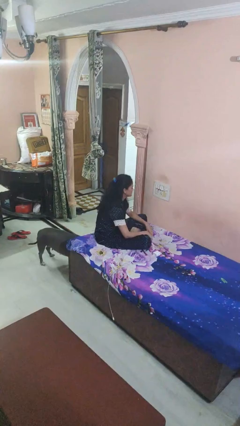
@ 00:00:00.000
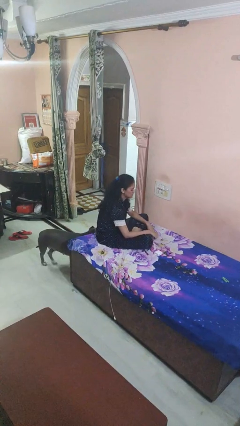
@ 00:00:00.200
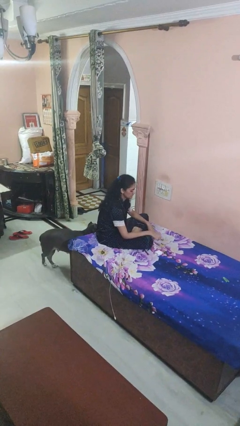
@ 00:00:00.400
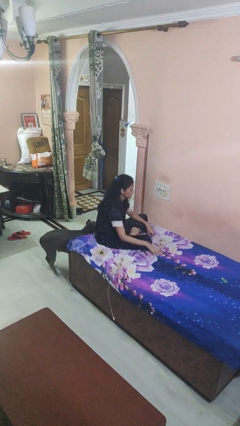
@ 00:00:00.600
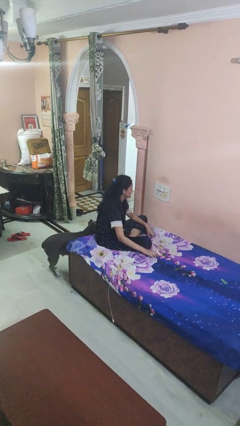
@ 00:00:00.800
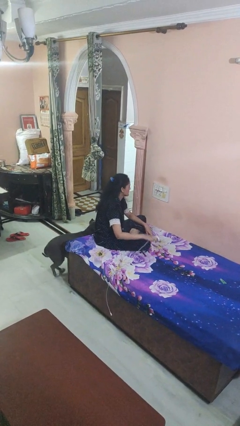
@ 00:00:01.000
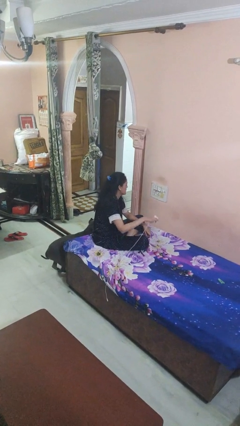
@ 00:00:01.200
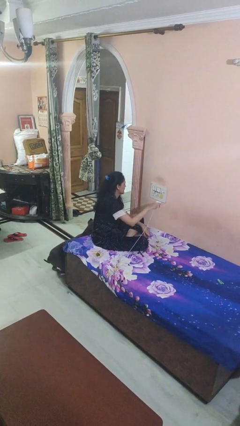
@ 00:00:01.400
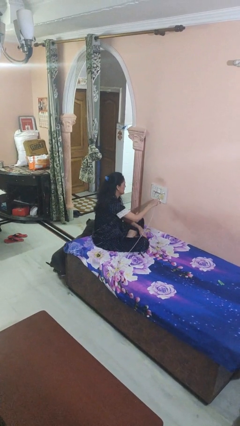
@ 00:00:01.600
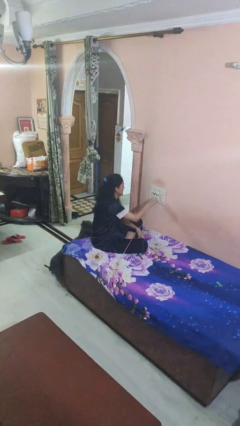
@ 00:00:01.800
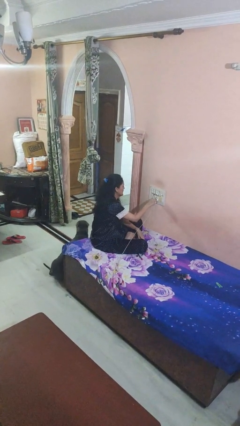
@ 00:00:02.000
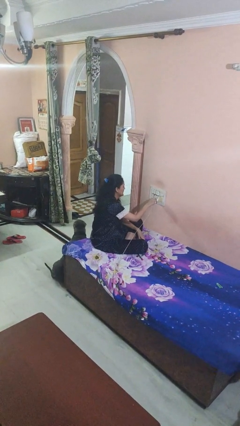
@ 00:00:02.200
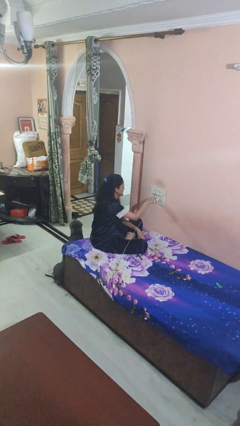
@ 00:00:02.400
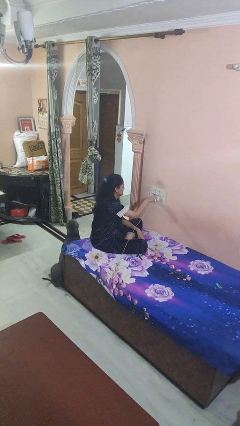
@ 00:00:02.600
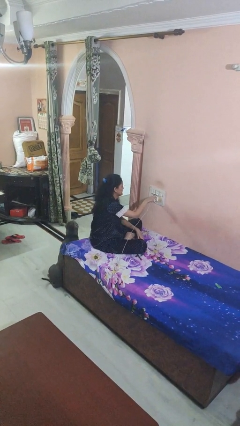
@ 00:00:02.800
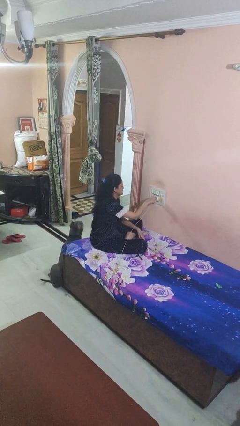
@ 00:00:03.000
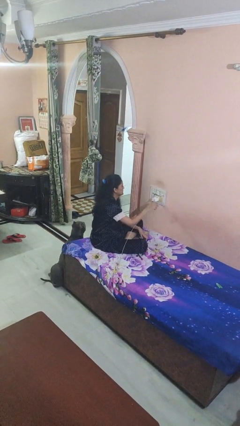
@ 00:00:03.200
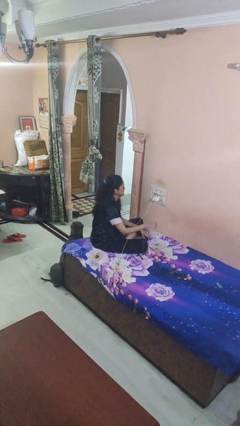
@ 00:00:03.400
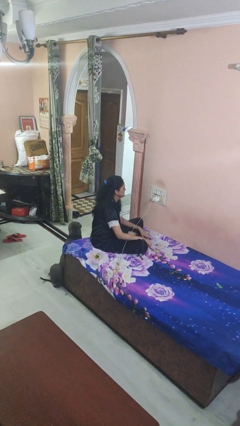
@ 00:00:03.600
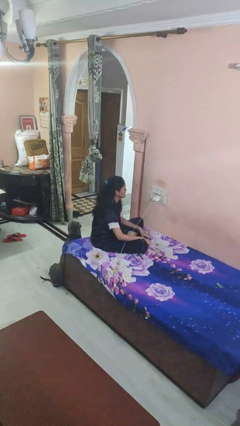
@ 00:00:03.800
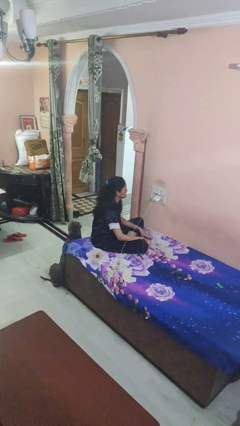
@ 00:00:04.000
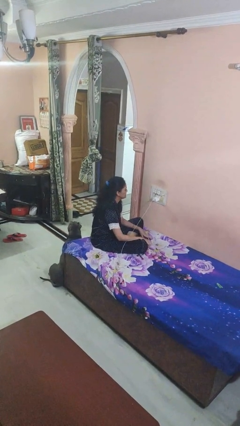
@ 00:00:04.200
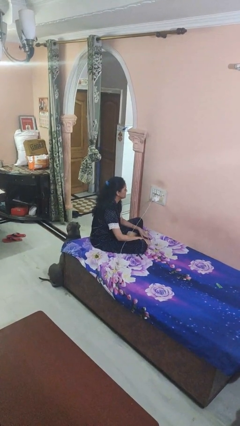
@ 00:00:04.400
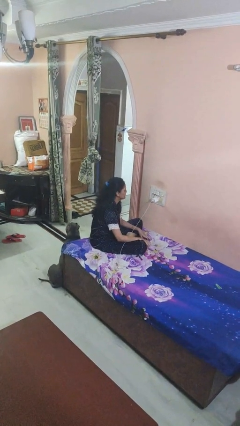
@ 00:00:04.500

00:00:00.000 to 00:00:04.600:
person plugs into electrical socket

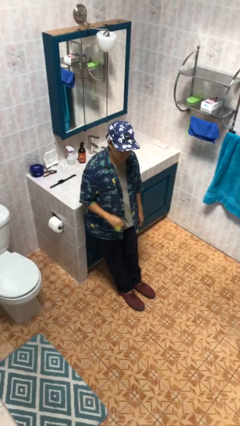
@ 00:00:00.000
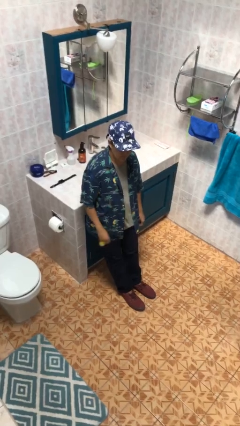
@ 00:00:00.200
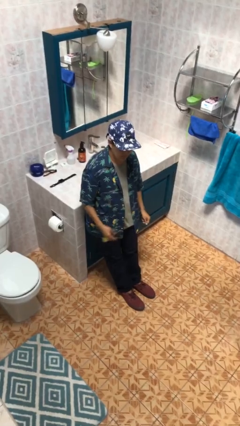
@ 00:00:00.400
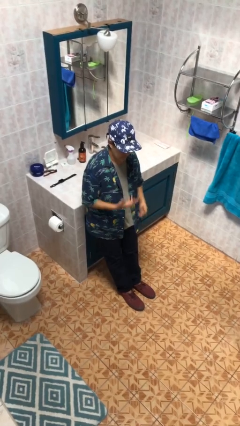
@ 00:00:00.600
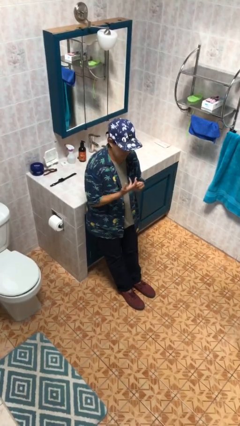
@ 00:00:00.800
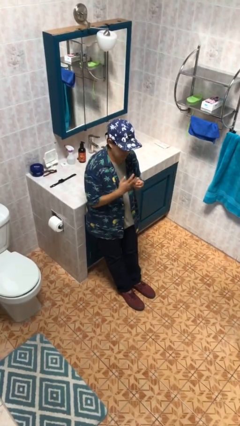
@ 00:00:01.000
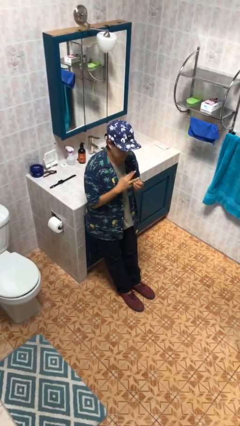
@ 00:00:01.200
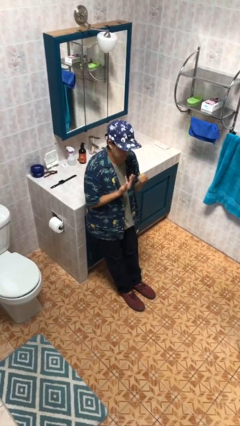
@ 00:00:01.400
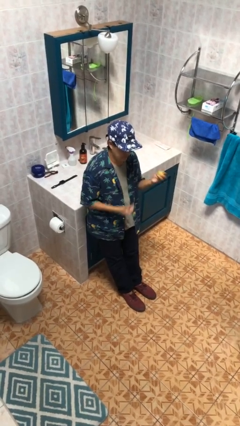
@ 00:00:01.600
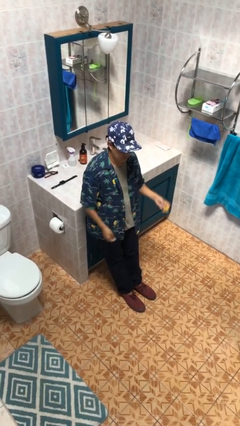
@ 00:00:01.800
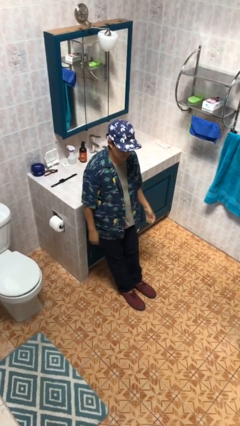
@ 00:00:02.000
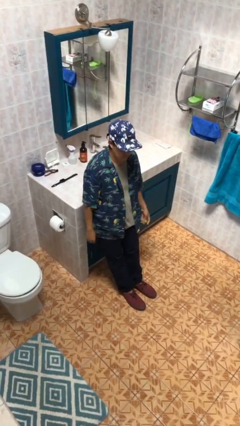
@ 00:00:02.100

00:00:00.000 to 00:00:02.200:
person takes off ring

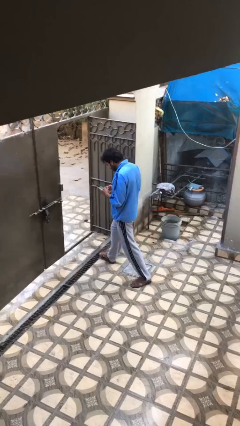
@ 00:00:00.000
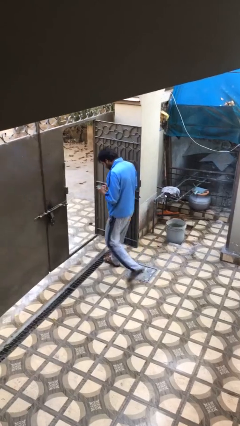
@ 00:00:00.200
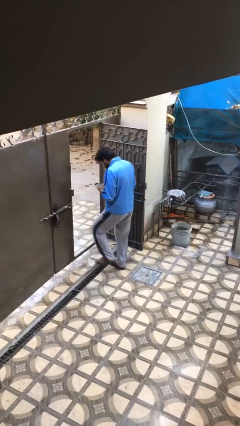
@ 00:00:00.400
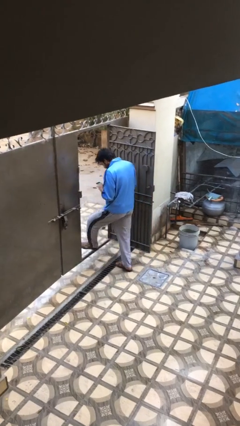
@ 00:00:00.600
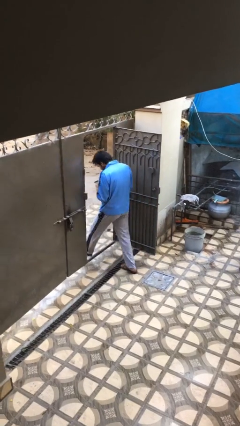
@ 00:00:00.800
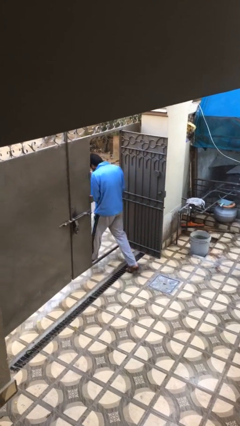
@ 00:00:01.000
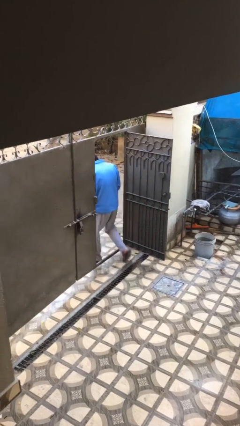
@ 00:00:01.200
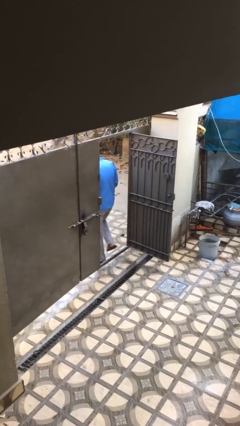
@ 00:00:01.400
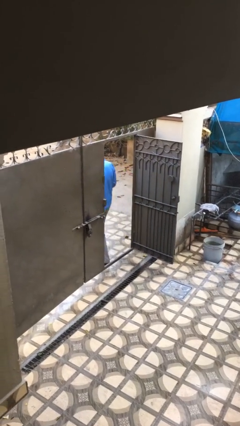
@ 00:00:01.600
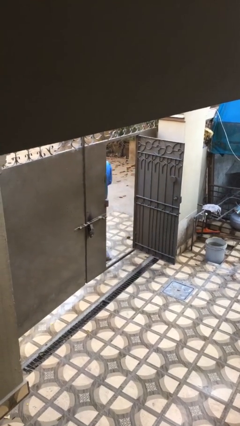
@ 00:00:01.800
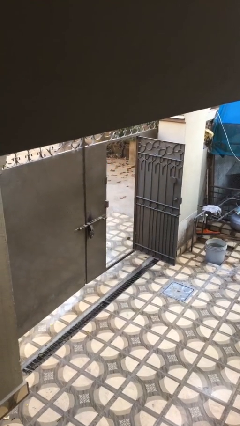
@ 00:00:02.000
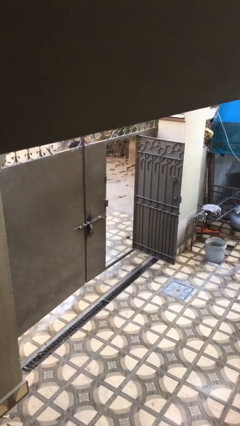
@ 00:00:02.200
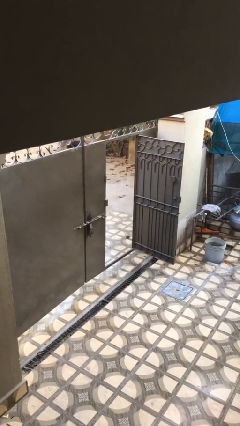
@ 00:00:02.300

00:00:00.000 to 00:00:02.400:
person exits scene through structure

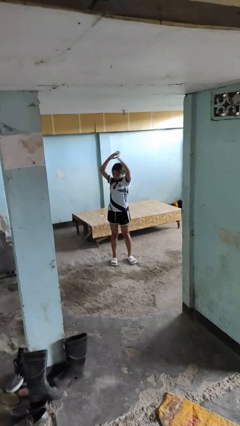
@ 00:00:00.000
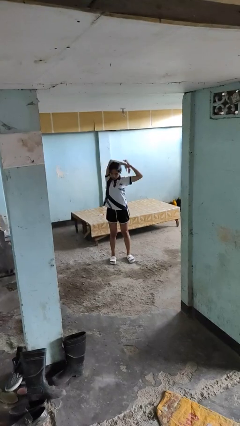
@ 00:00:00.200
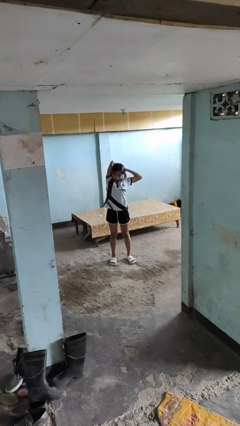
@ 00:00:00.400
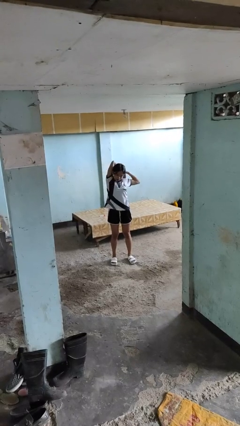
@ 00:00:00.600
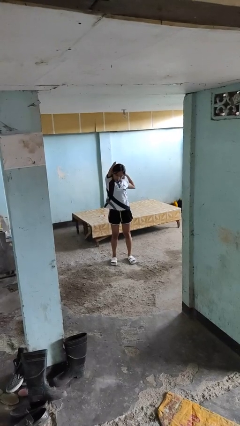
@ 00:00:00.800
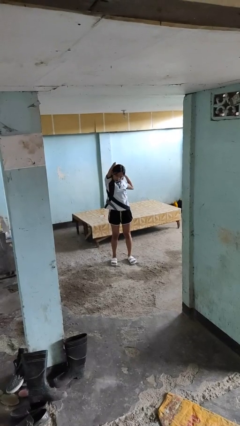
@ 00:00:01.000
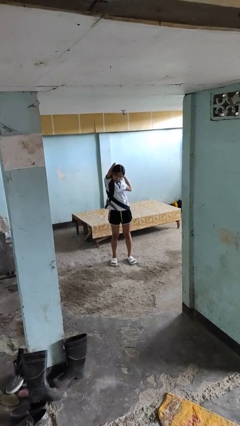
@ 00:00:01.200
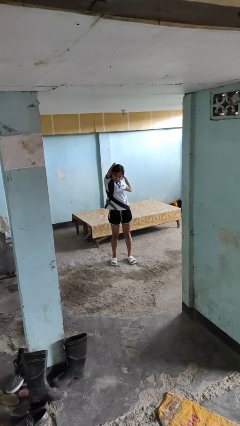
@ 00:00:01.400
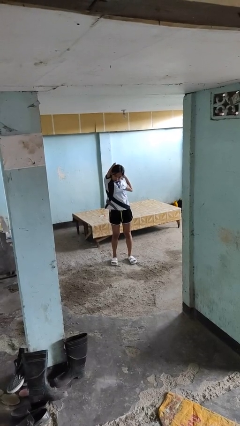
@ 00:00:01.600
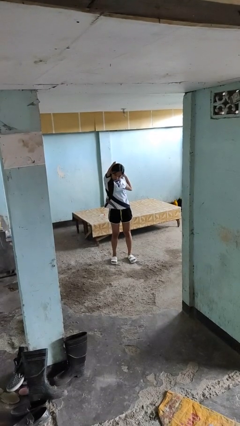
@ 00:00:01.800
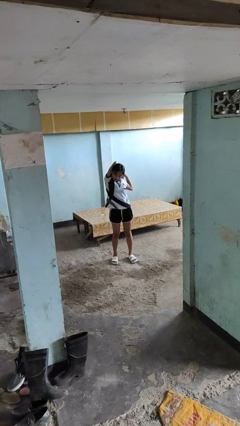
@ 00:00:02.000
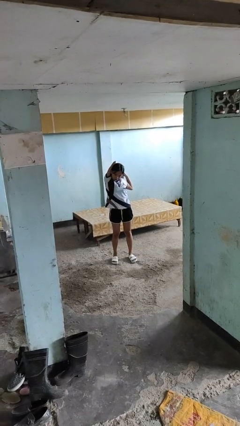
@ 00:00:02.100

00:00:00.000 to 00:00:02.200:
person stretches arms over head

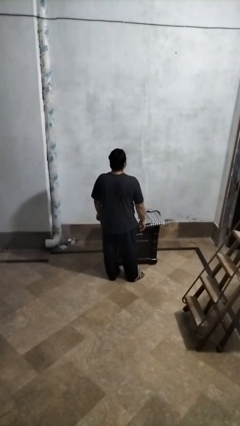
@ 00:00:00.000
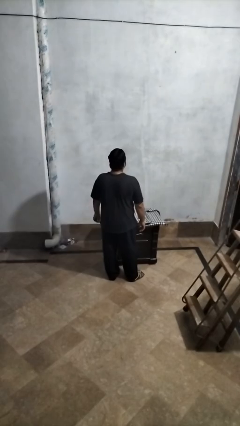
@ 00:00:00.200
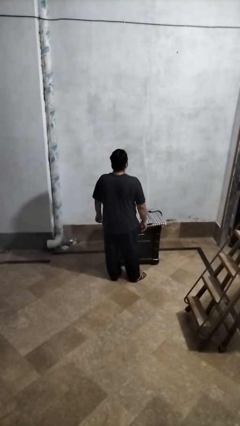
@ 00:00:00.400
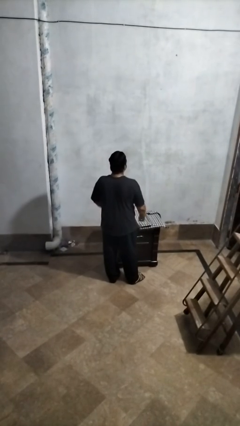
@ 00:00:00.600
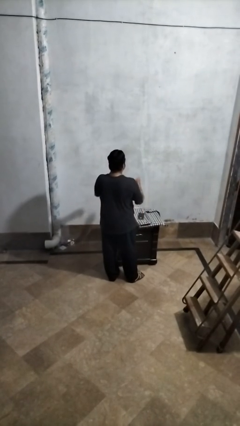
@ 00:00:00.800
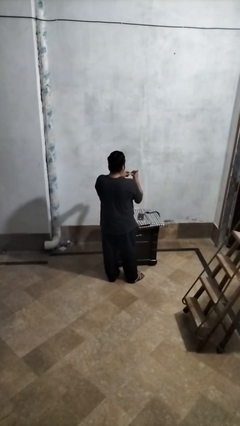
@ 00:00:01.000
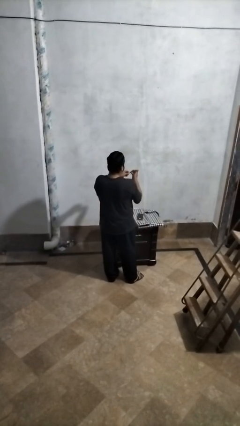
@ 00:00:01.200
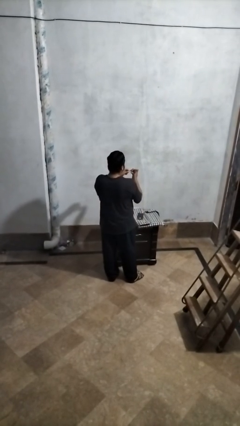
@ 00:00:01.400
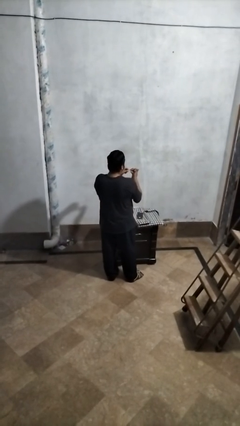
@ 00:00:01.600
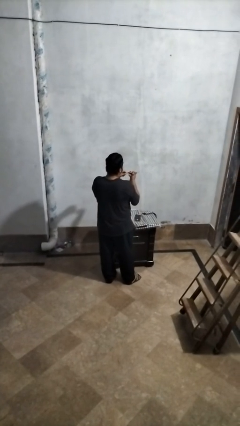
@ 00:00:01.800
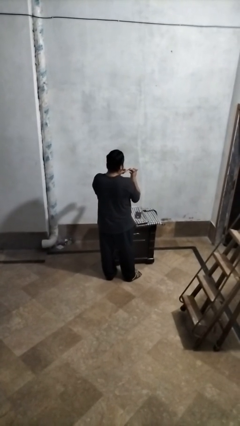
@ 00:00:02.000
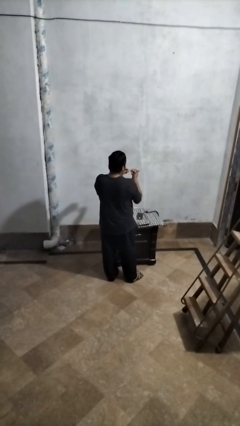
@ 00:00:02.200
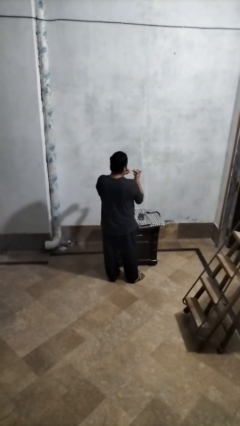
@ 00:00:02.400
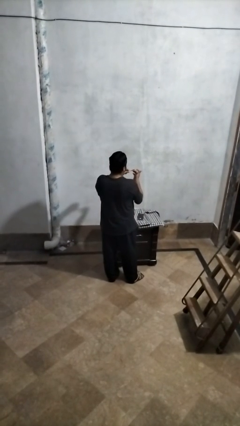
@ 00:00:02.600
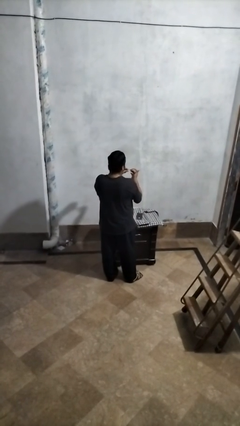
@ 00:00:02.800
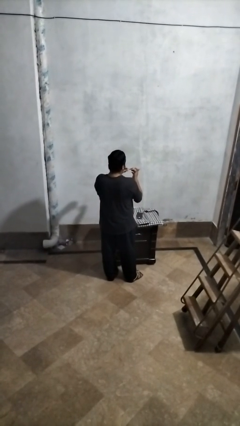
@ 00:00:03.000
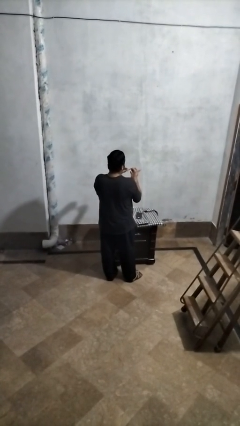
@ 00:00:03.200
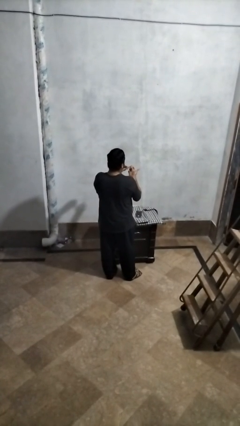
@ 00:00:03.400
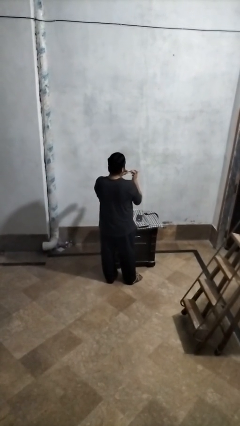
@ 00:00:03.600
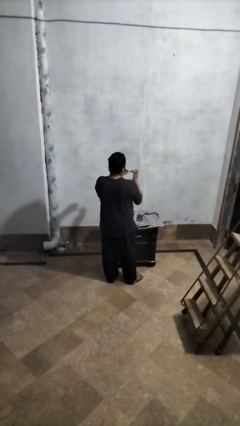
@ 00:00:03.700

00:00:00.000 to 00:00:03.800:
person files fingernails

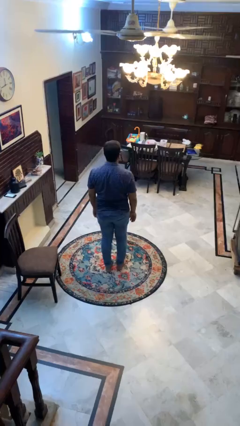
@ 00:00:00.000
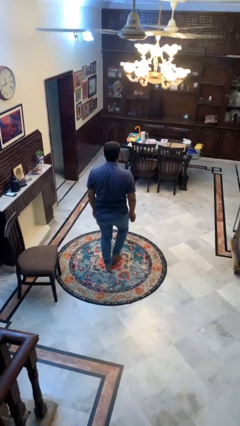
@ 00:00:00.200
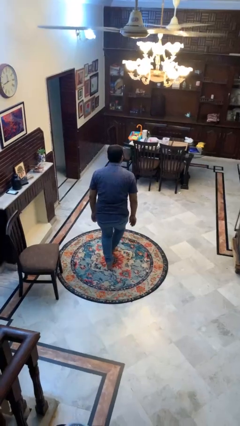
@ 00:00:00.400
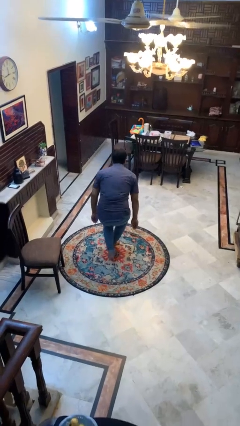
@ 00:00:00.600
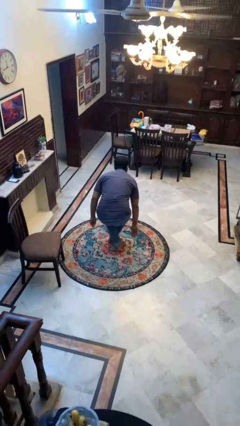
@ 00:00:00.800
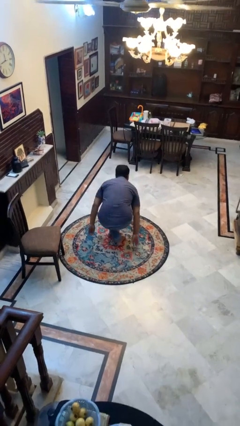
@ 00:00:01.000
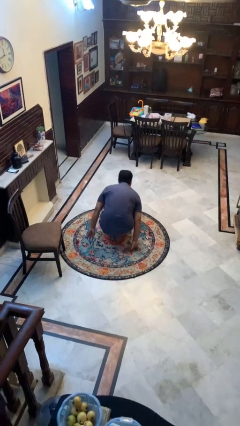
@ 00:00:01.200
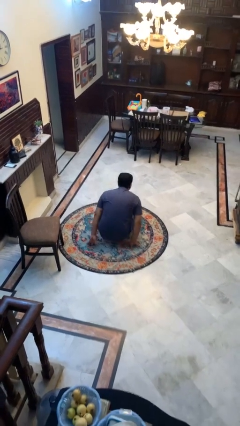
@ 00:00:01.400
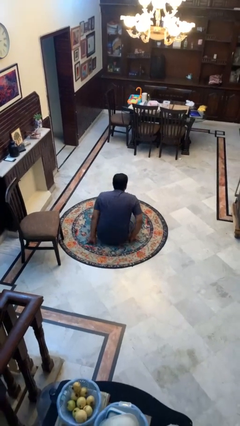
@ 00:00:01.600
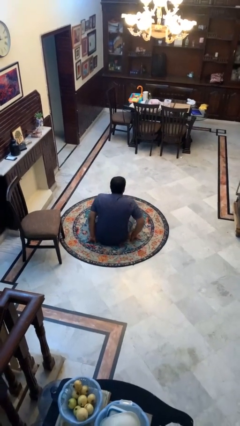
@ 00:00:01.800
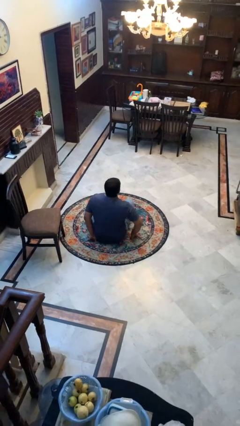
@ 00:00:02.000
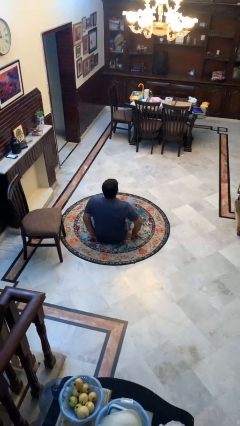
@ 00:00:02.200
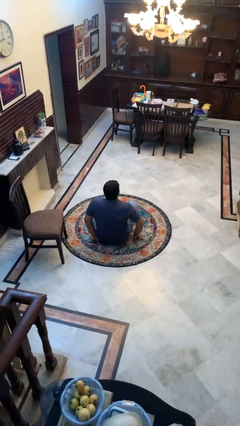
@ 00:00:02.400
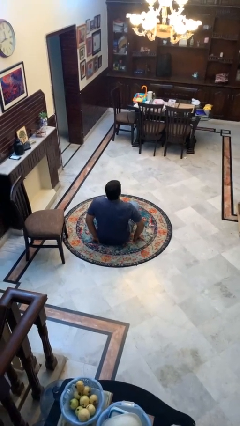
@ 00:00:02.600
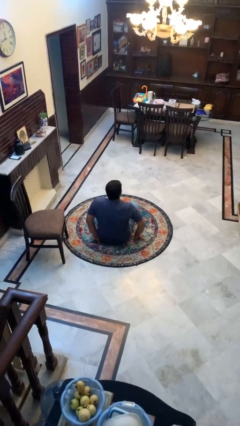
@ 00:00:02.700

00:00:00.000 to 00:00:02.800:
person sits crisscross
